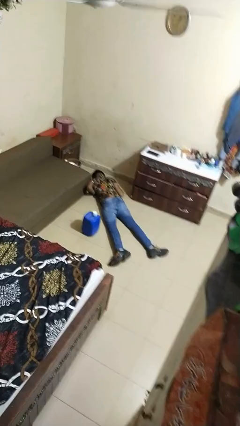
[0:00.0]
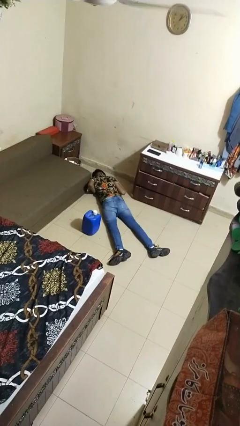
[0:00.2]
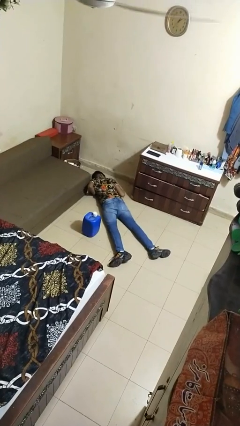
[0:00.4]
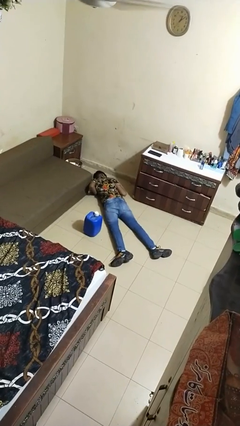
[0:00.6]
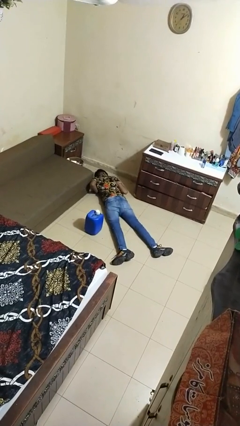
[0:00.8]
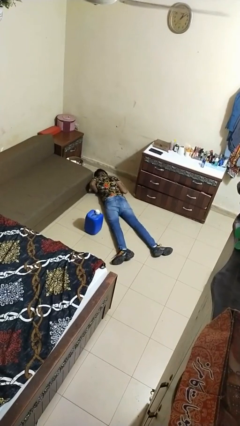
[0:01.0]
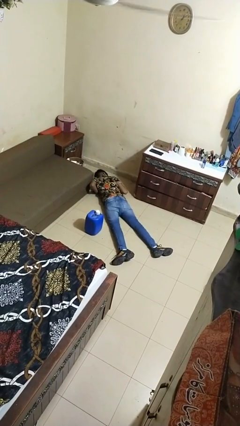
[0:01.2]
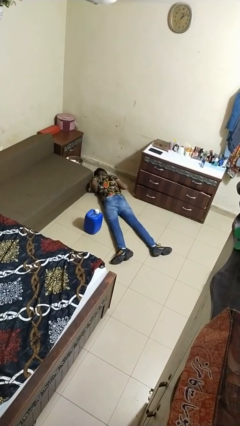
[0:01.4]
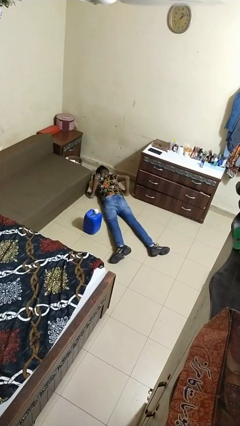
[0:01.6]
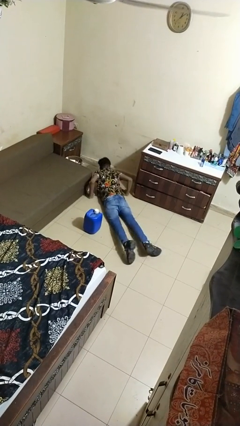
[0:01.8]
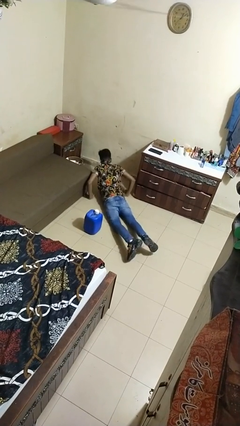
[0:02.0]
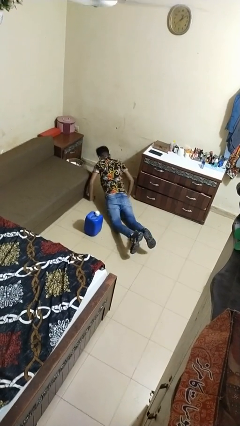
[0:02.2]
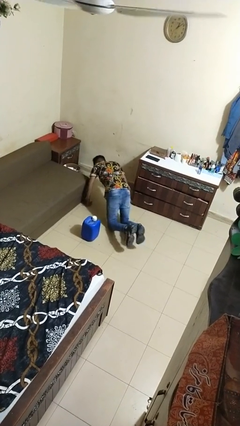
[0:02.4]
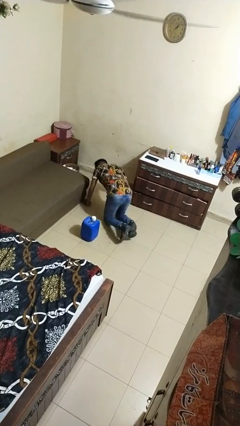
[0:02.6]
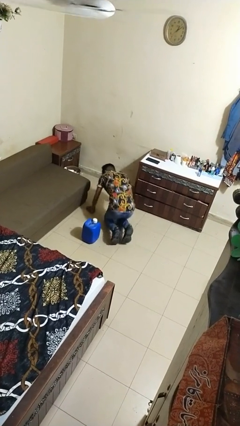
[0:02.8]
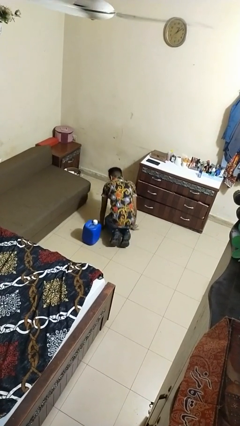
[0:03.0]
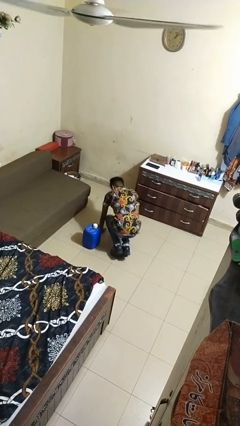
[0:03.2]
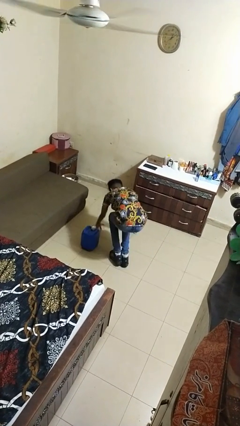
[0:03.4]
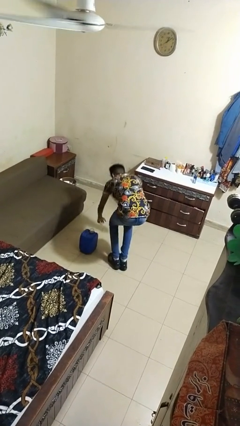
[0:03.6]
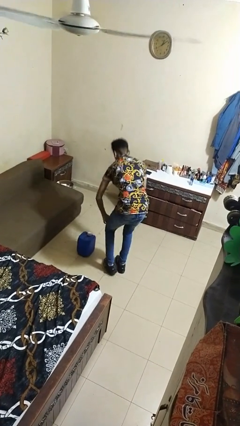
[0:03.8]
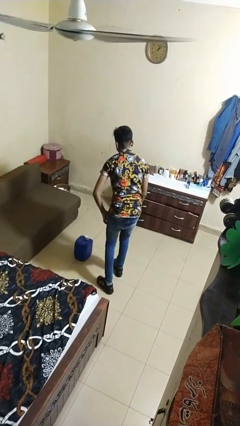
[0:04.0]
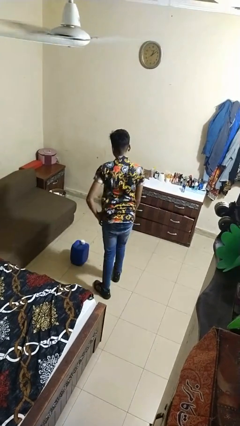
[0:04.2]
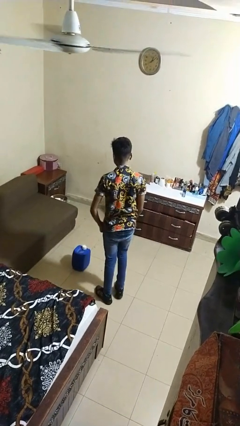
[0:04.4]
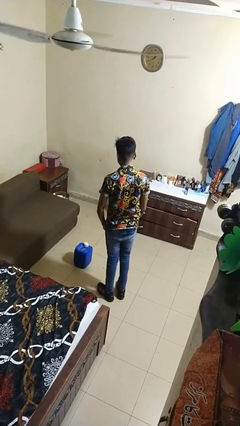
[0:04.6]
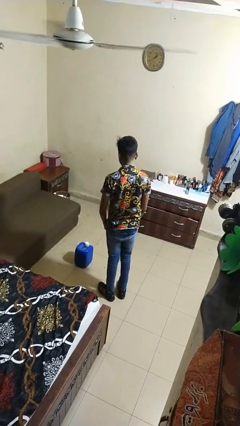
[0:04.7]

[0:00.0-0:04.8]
person stands up from floor

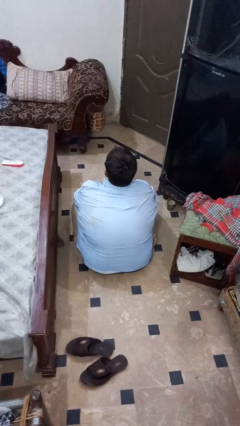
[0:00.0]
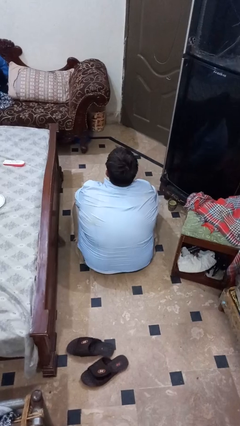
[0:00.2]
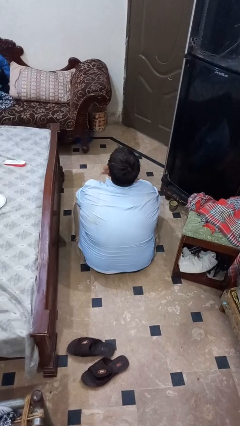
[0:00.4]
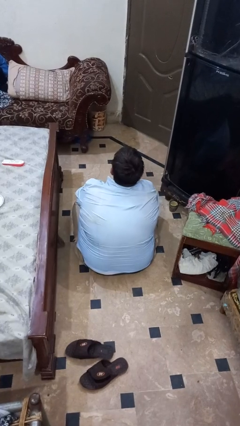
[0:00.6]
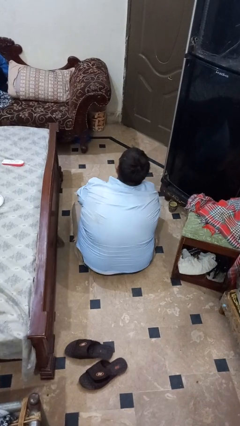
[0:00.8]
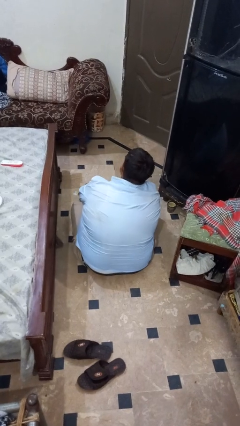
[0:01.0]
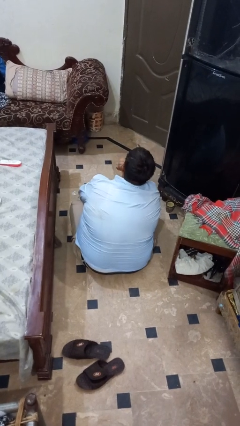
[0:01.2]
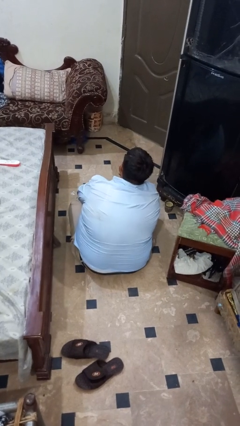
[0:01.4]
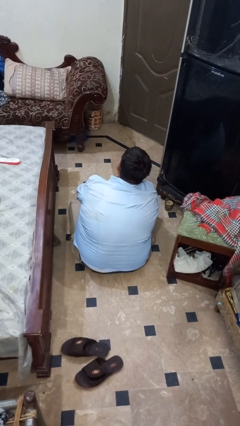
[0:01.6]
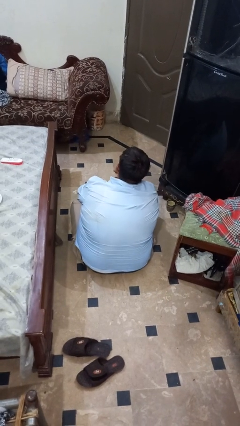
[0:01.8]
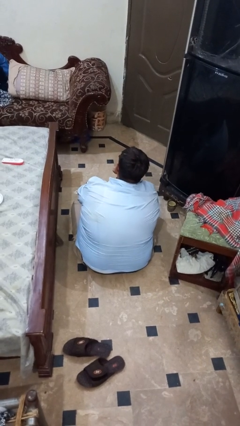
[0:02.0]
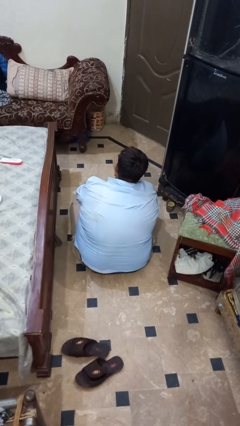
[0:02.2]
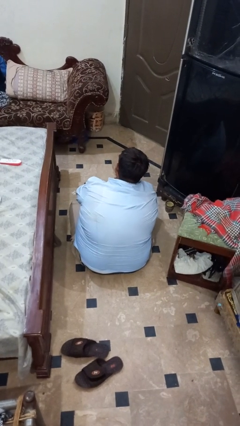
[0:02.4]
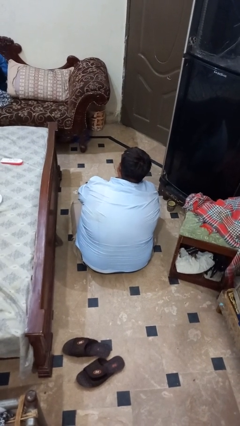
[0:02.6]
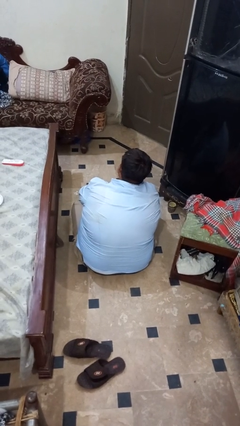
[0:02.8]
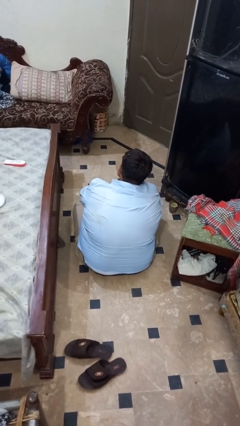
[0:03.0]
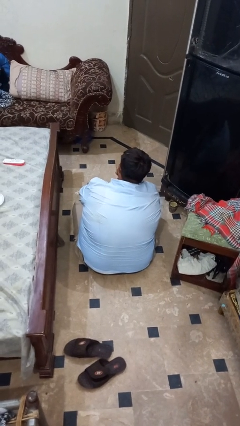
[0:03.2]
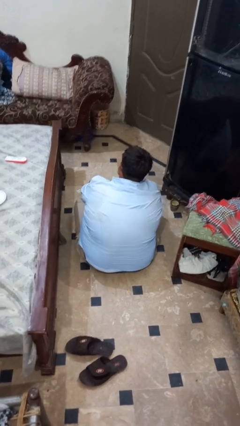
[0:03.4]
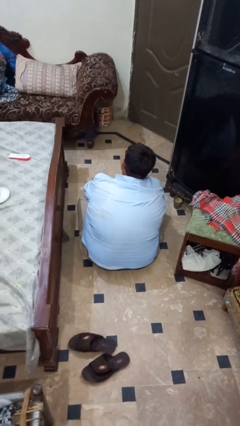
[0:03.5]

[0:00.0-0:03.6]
person strokes chin

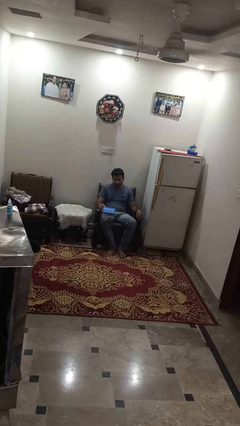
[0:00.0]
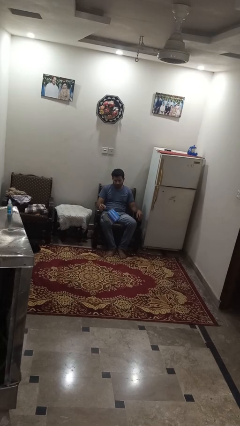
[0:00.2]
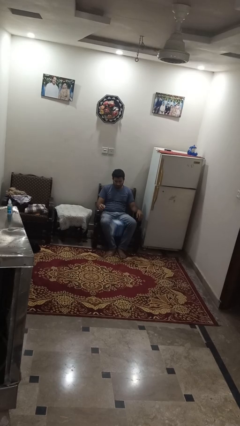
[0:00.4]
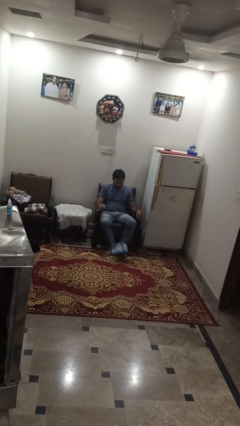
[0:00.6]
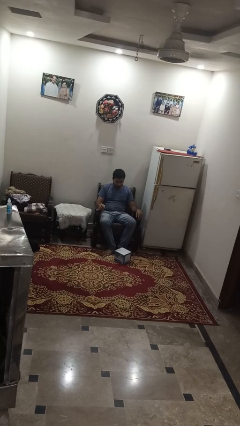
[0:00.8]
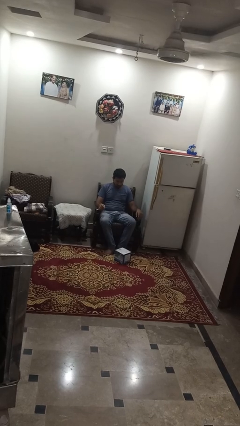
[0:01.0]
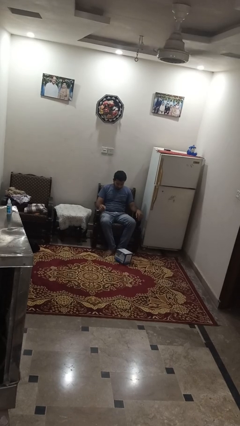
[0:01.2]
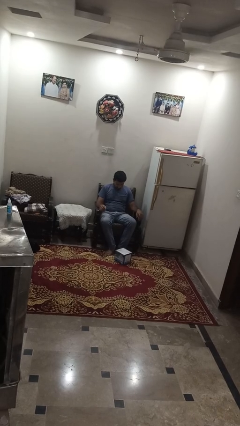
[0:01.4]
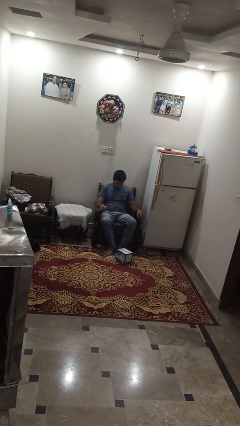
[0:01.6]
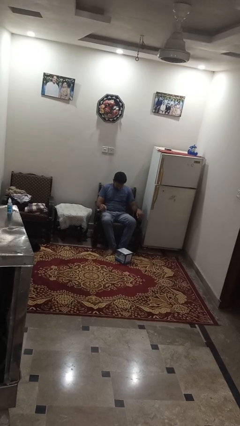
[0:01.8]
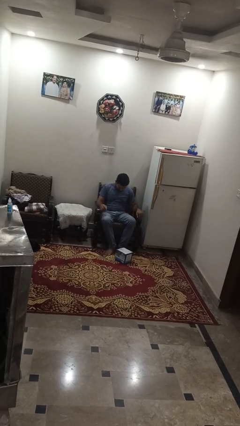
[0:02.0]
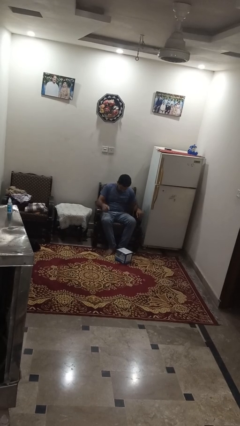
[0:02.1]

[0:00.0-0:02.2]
person drops object

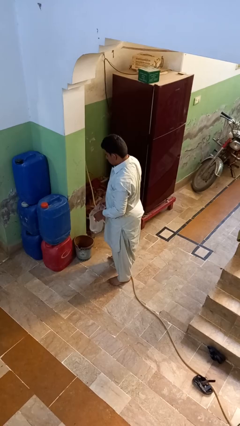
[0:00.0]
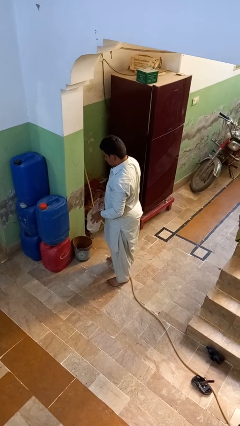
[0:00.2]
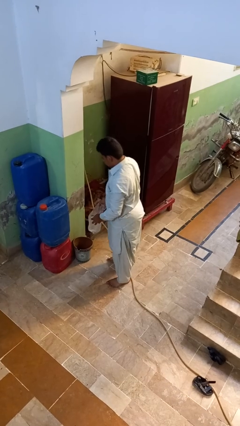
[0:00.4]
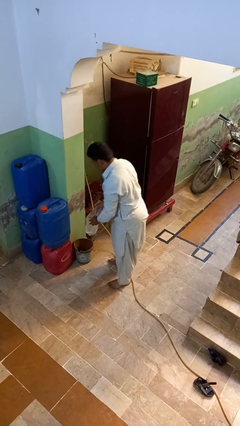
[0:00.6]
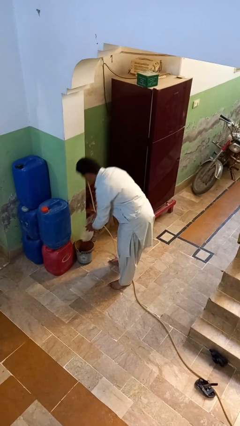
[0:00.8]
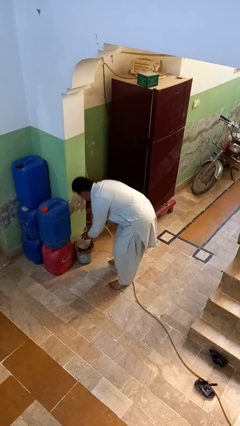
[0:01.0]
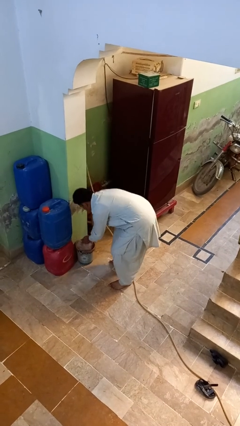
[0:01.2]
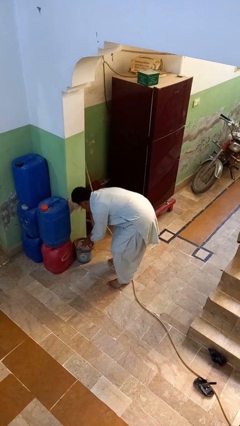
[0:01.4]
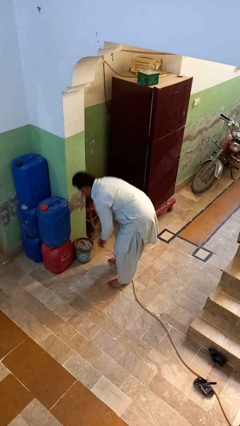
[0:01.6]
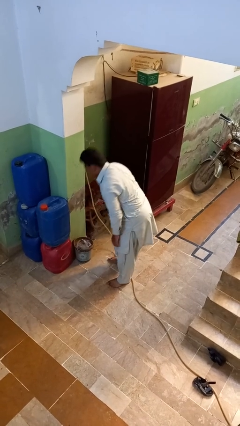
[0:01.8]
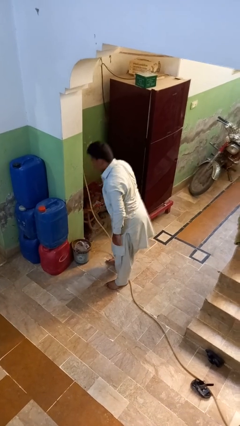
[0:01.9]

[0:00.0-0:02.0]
person inserts trashbag into trashcan

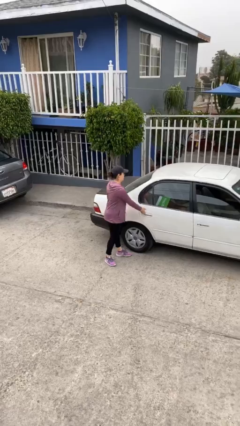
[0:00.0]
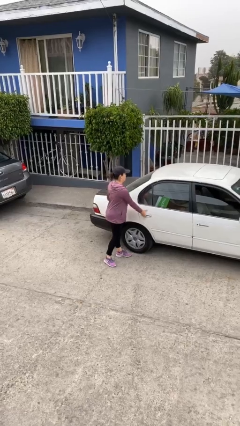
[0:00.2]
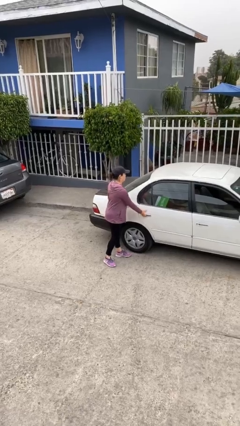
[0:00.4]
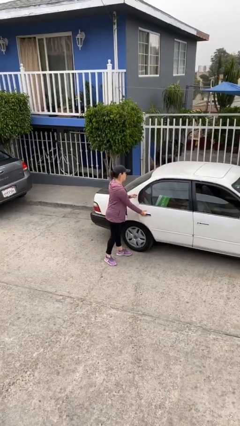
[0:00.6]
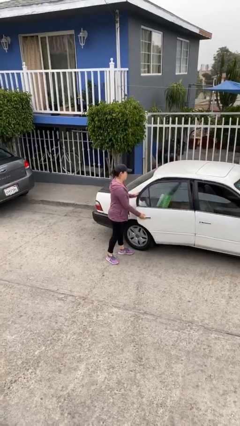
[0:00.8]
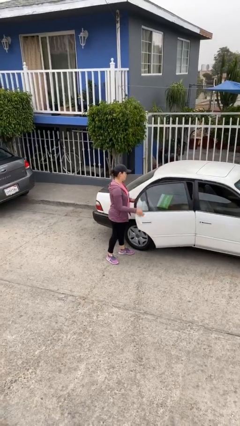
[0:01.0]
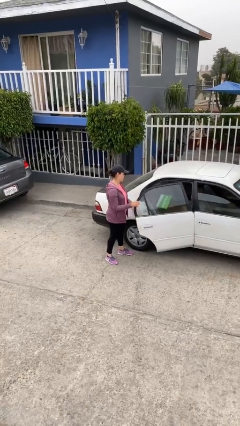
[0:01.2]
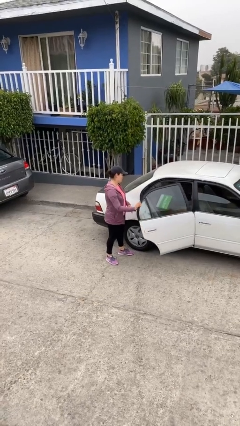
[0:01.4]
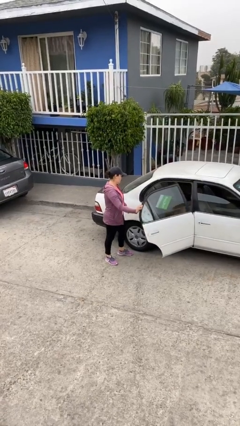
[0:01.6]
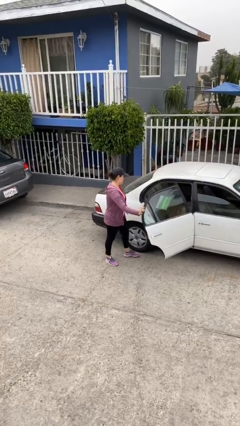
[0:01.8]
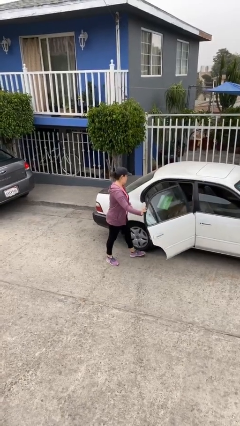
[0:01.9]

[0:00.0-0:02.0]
person opens car door

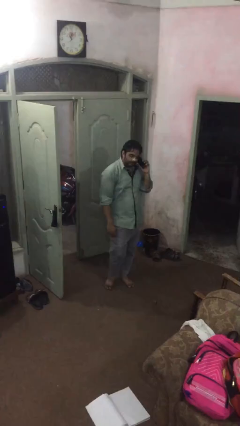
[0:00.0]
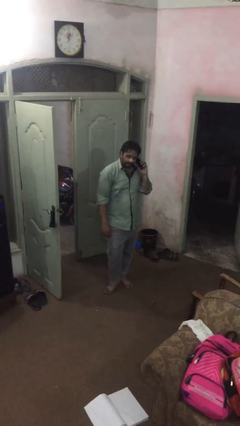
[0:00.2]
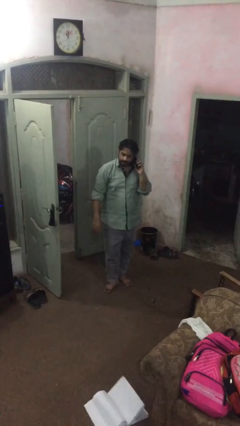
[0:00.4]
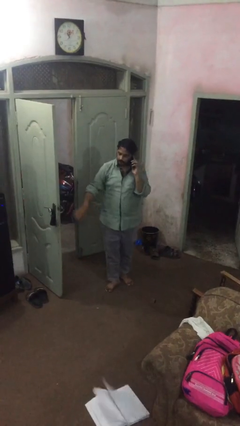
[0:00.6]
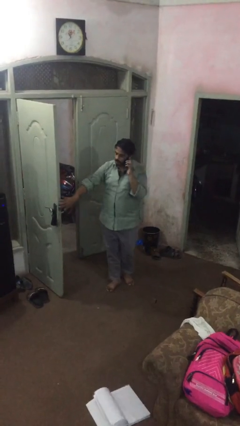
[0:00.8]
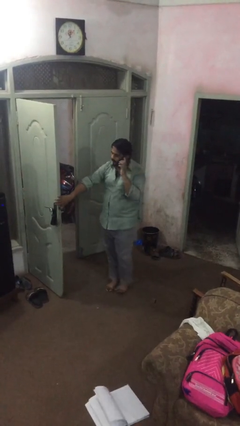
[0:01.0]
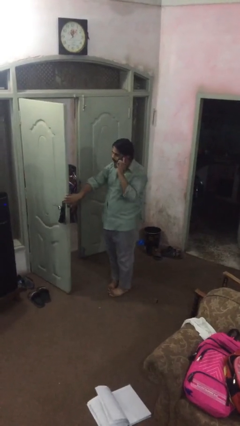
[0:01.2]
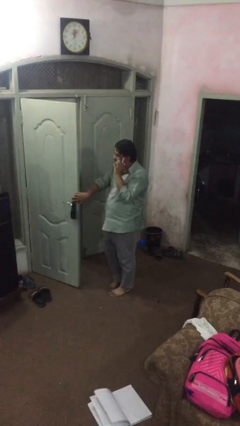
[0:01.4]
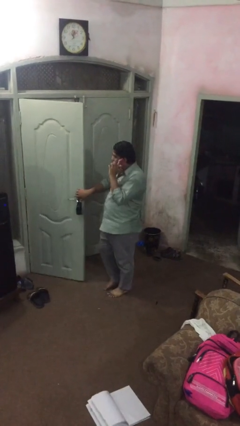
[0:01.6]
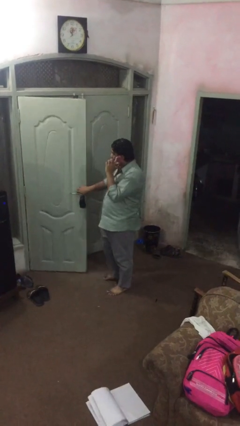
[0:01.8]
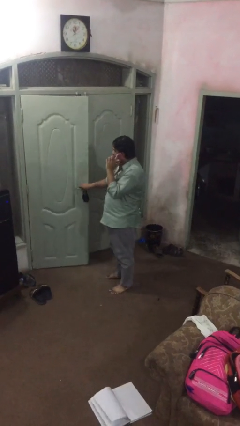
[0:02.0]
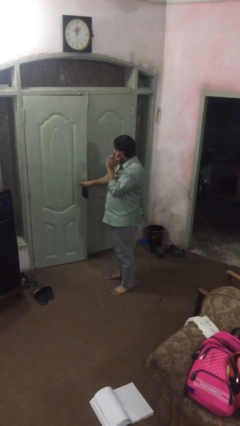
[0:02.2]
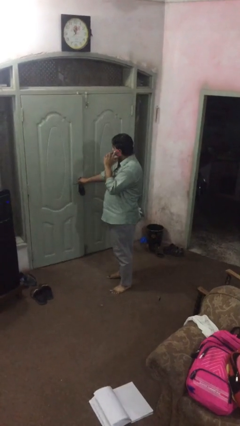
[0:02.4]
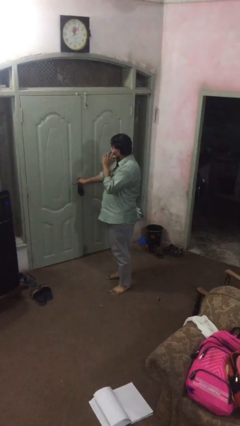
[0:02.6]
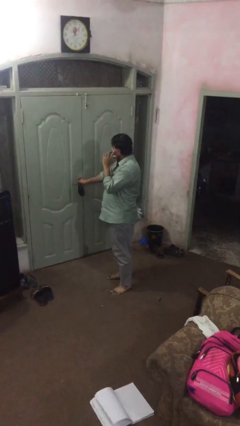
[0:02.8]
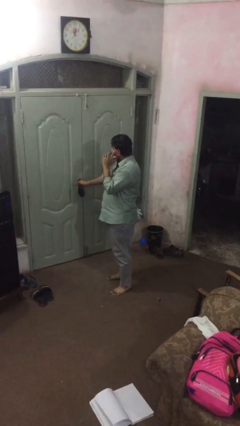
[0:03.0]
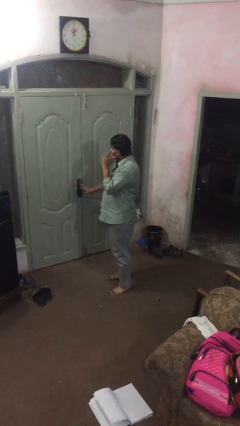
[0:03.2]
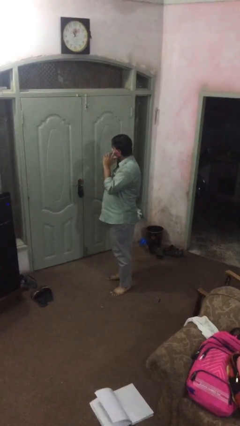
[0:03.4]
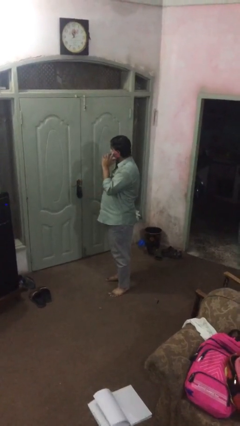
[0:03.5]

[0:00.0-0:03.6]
person closes facility door
